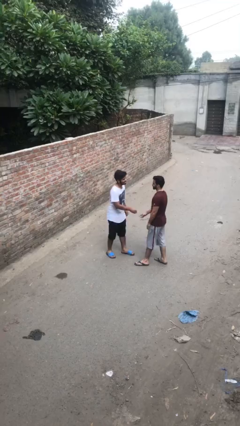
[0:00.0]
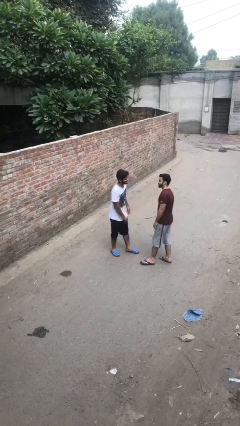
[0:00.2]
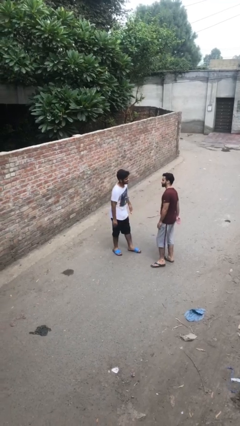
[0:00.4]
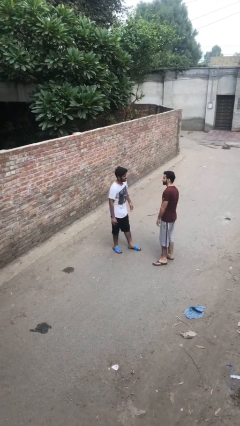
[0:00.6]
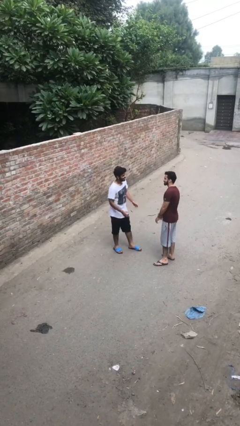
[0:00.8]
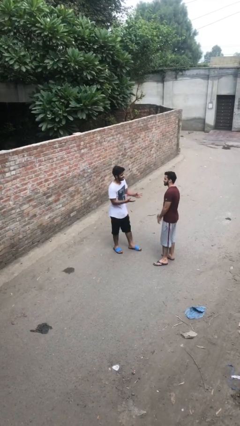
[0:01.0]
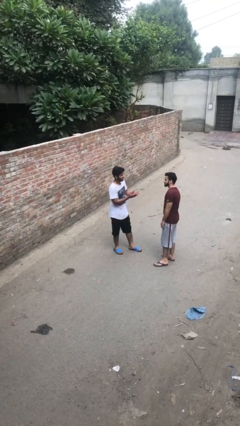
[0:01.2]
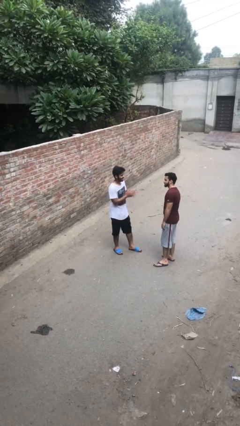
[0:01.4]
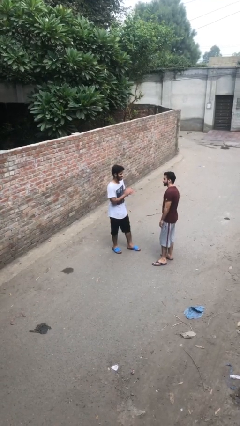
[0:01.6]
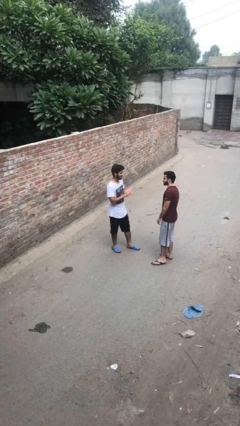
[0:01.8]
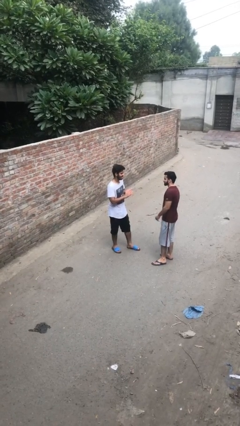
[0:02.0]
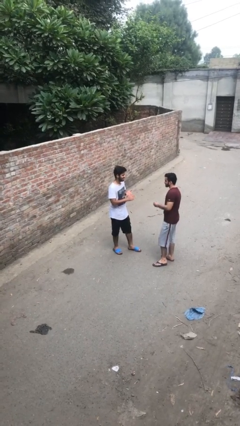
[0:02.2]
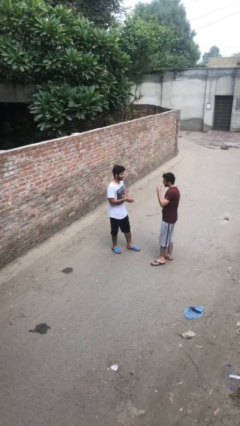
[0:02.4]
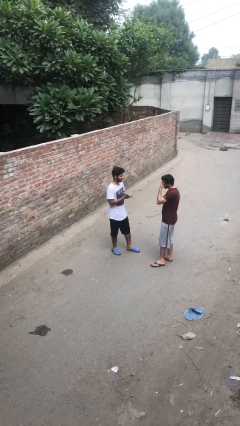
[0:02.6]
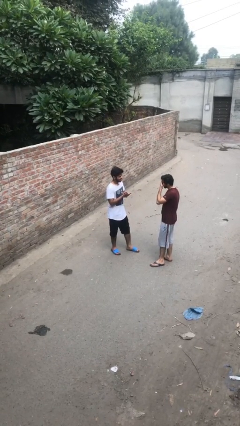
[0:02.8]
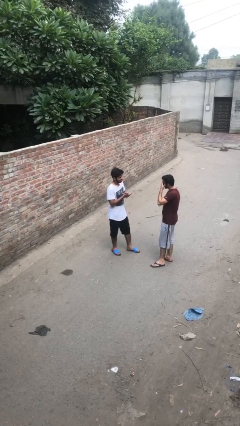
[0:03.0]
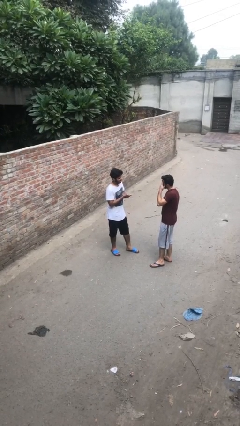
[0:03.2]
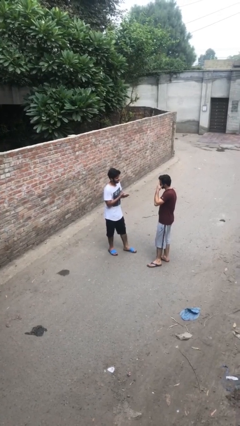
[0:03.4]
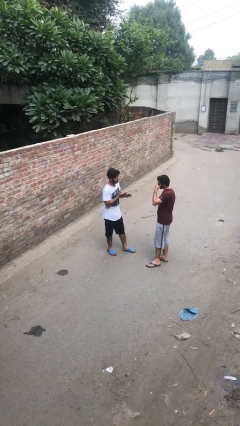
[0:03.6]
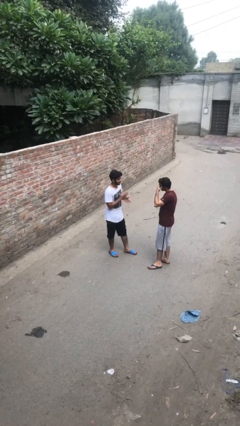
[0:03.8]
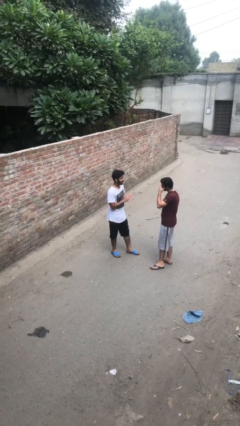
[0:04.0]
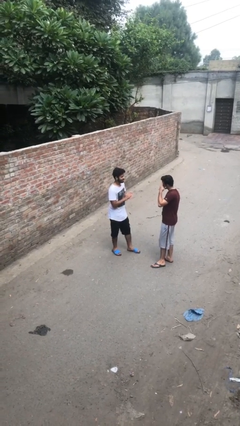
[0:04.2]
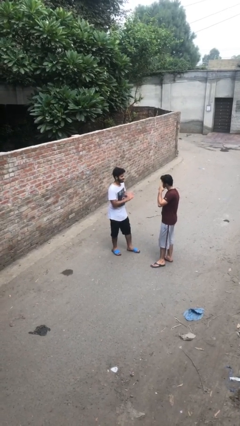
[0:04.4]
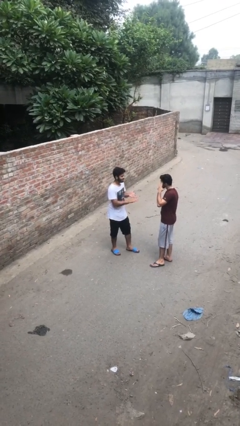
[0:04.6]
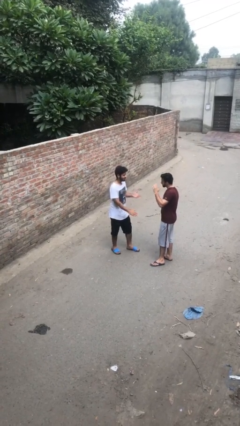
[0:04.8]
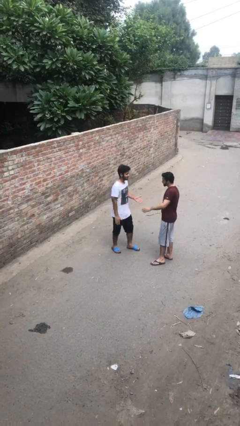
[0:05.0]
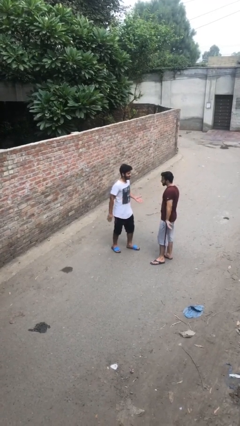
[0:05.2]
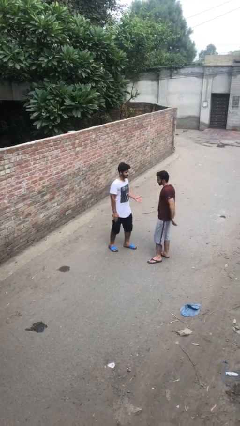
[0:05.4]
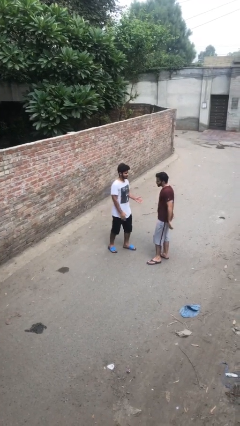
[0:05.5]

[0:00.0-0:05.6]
person talks to person

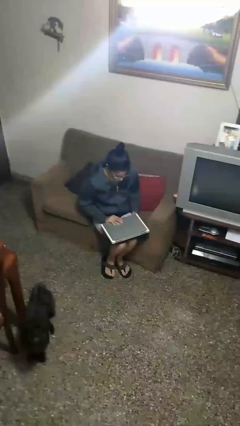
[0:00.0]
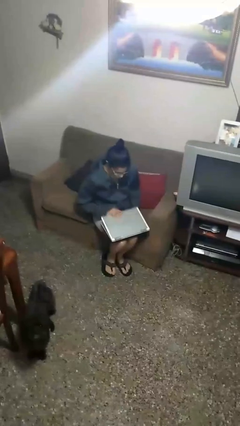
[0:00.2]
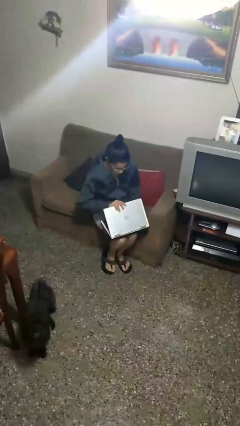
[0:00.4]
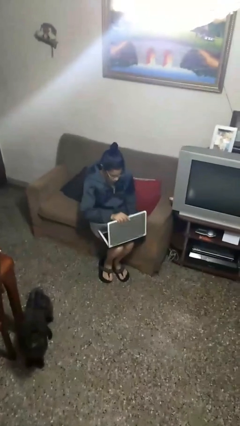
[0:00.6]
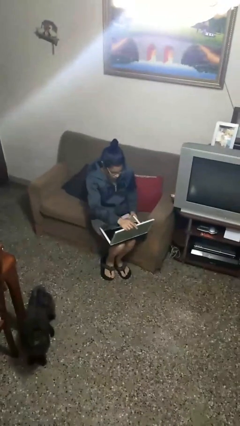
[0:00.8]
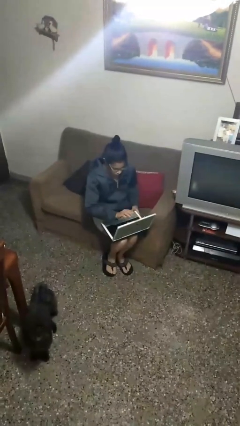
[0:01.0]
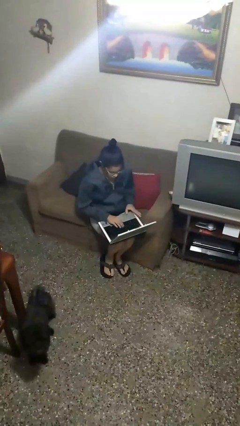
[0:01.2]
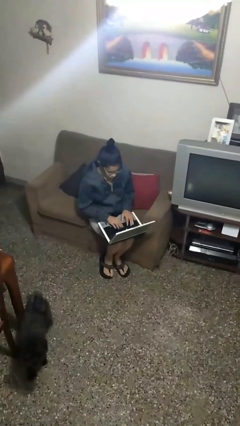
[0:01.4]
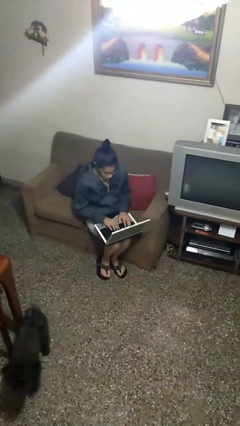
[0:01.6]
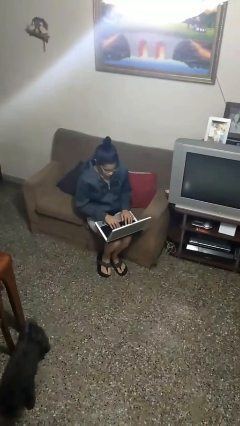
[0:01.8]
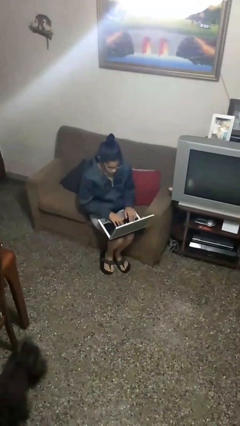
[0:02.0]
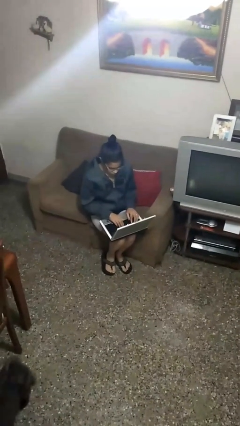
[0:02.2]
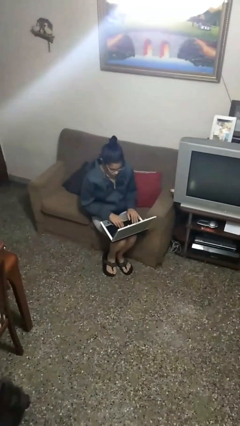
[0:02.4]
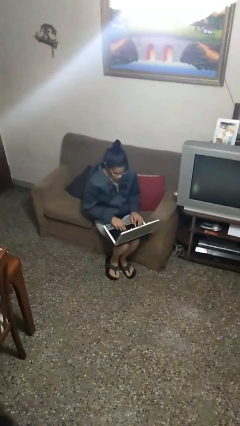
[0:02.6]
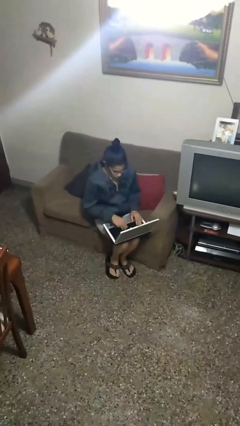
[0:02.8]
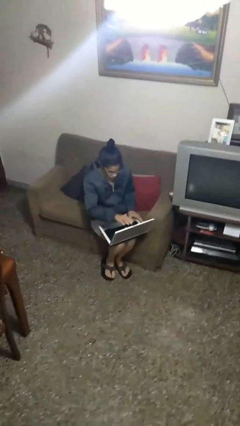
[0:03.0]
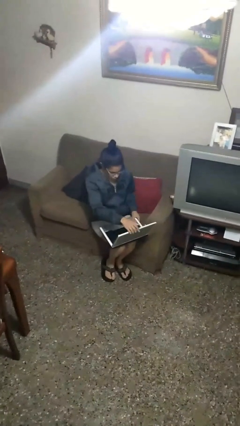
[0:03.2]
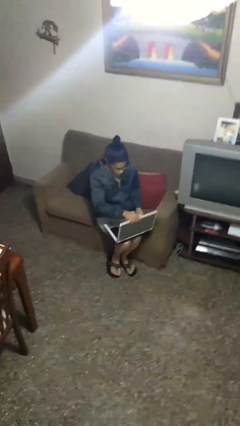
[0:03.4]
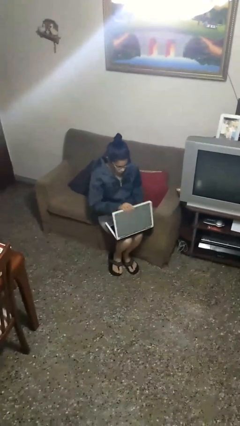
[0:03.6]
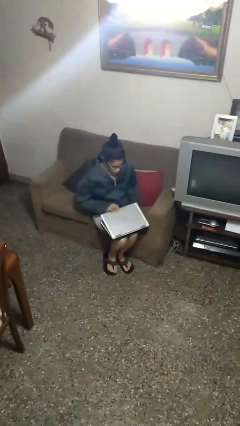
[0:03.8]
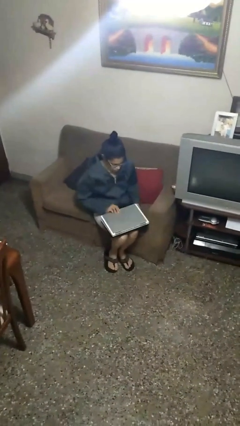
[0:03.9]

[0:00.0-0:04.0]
person interacts with laptop

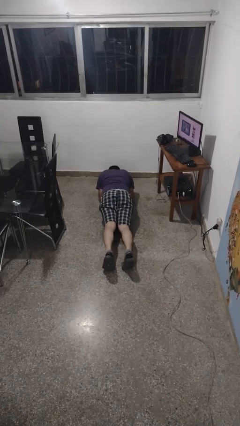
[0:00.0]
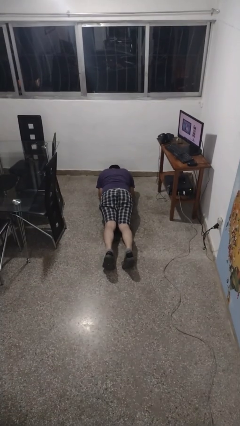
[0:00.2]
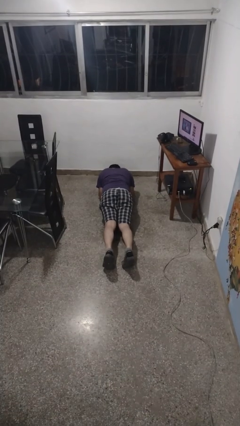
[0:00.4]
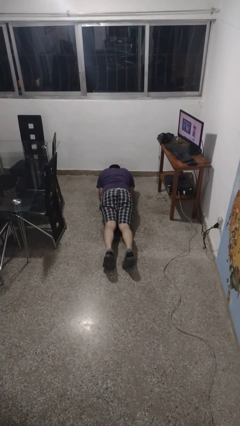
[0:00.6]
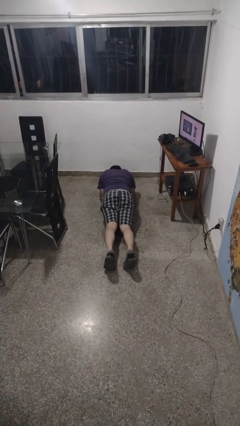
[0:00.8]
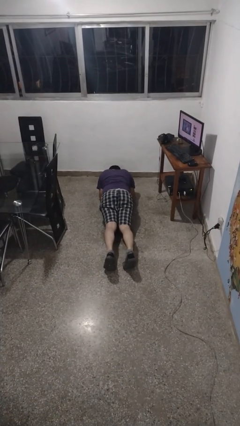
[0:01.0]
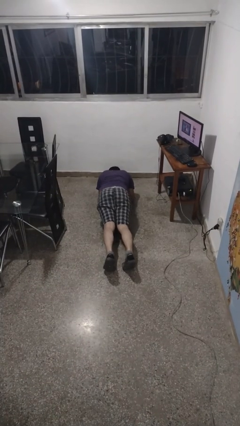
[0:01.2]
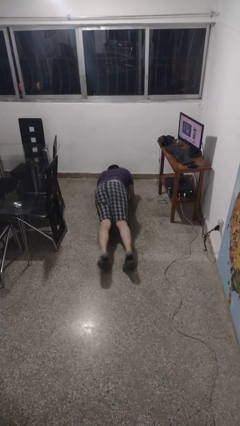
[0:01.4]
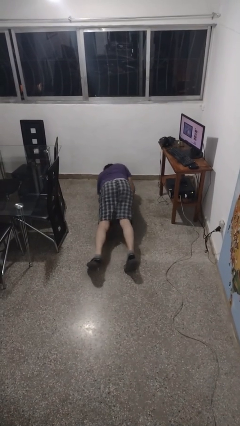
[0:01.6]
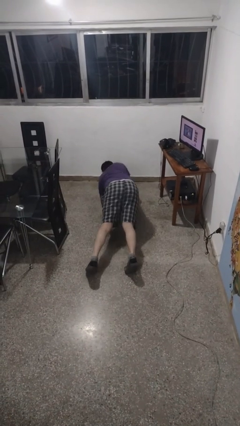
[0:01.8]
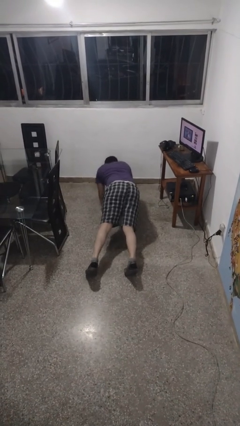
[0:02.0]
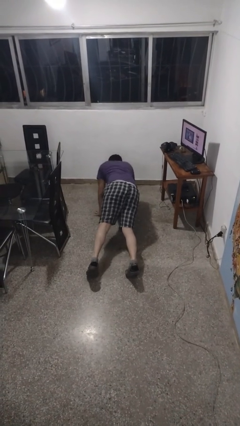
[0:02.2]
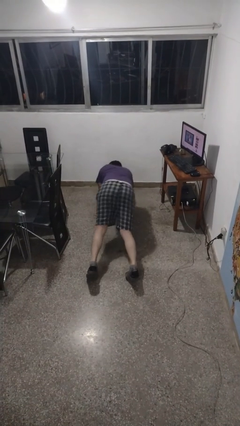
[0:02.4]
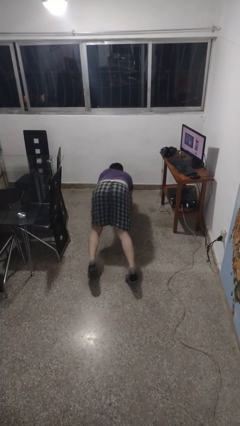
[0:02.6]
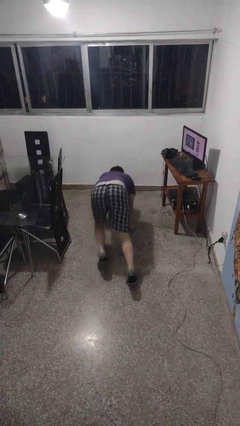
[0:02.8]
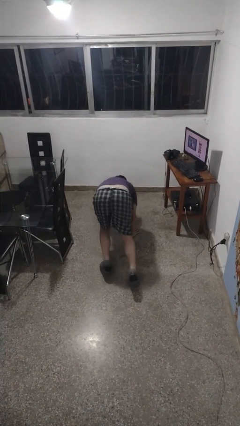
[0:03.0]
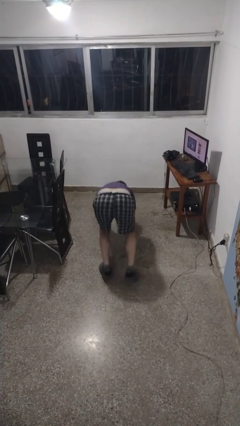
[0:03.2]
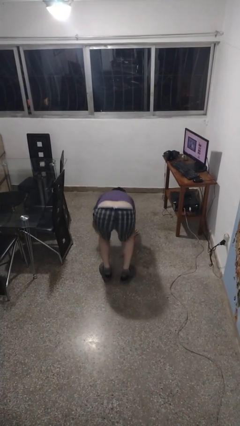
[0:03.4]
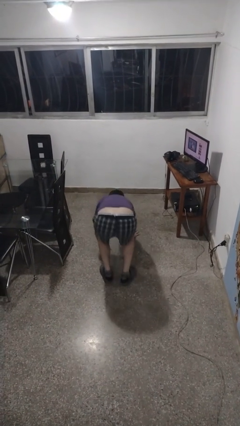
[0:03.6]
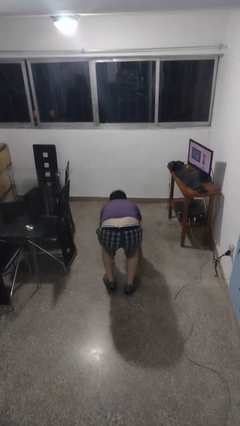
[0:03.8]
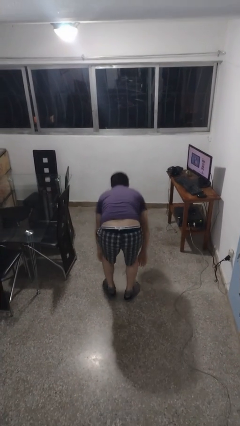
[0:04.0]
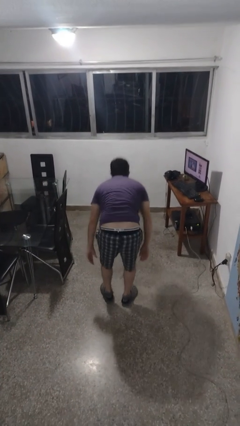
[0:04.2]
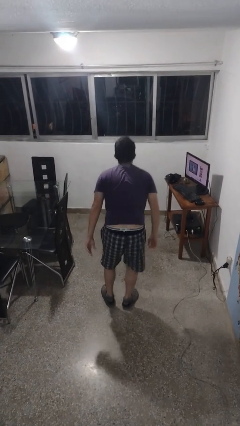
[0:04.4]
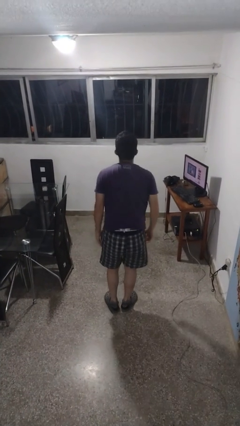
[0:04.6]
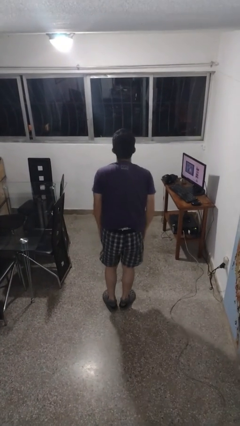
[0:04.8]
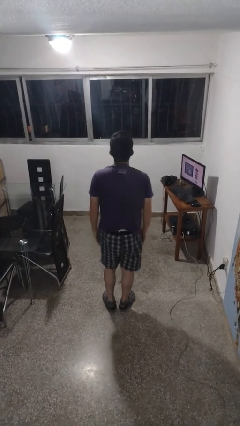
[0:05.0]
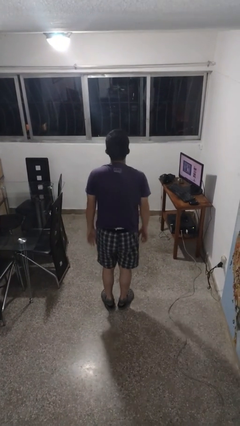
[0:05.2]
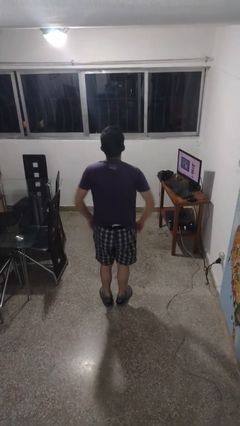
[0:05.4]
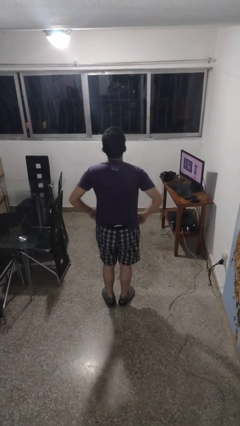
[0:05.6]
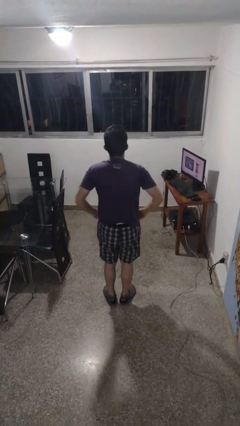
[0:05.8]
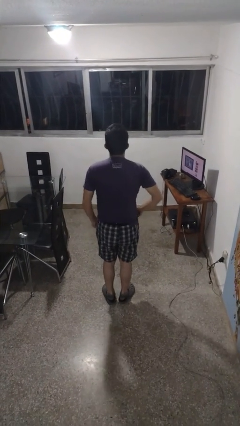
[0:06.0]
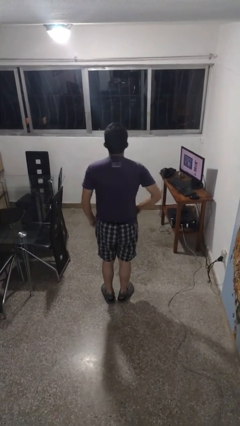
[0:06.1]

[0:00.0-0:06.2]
person stands up from floor

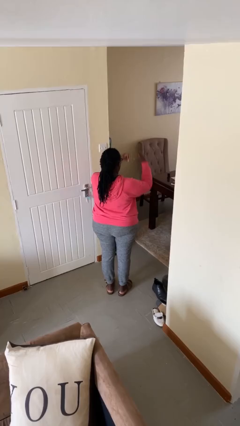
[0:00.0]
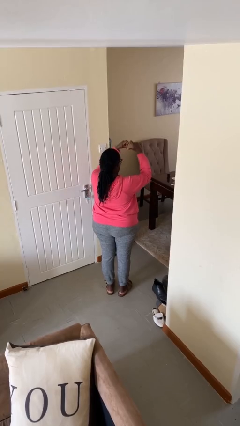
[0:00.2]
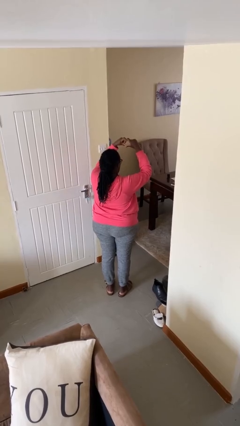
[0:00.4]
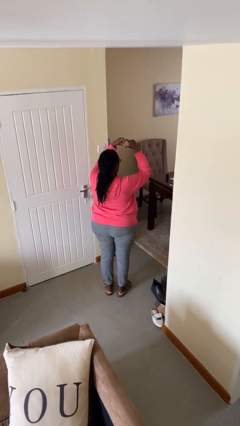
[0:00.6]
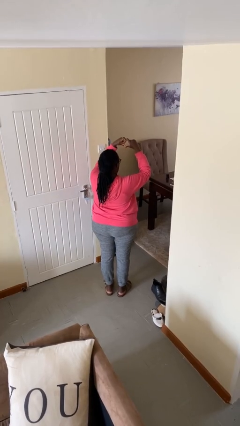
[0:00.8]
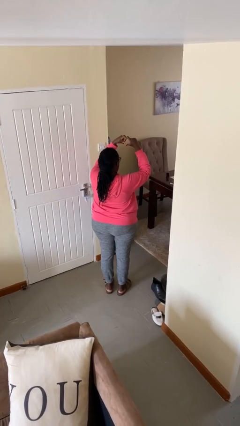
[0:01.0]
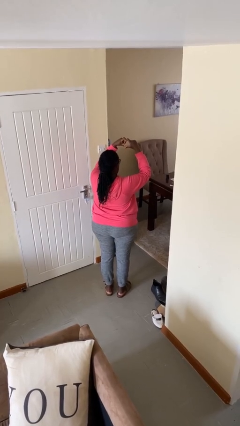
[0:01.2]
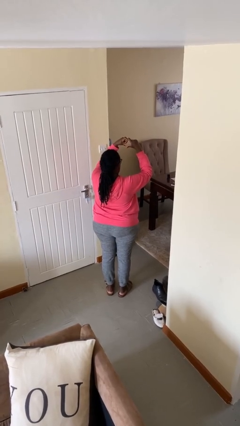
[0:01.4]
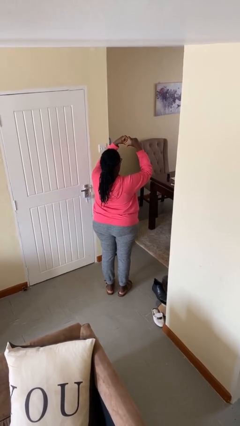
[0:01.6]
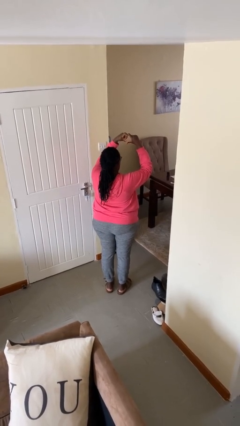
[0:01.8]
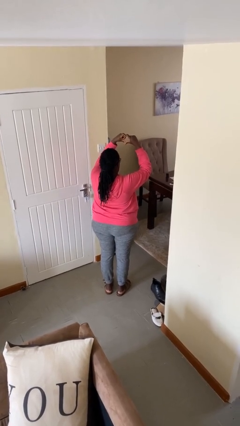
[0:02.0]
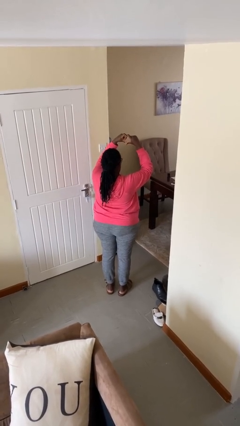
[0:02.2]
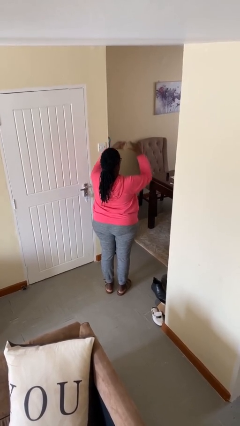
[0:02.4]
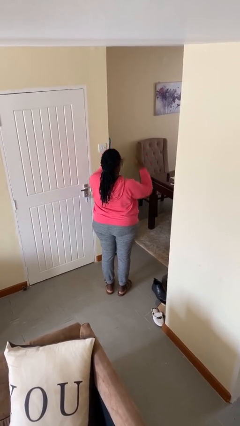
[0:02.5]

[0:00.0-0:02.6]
person gestures heart
